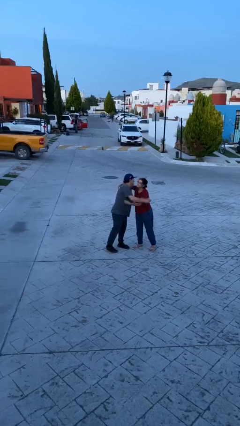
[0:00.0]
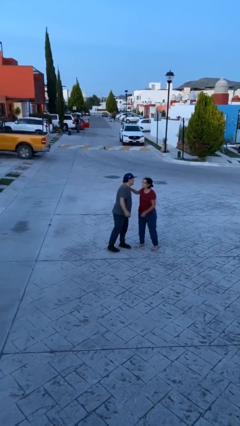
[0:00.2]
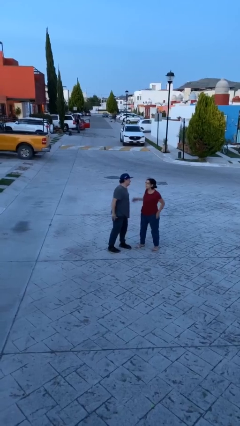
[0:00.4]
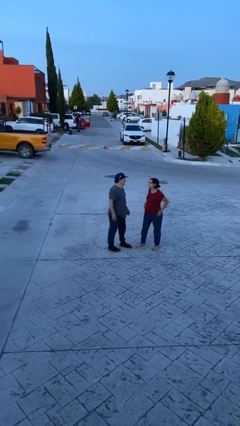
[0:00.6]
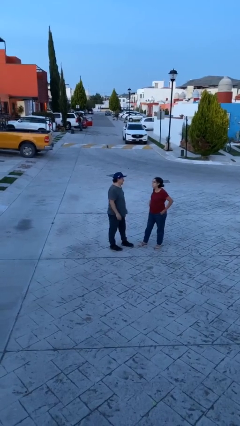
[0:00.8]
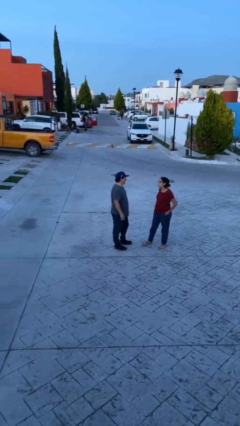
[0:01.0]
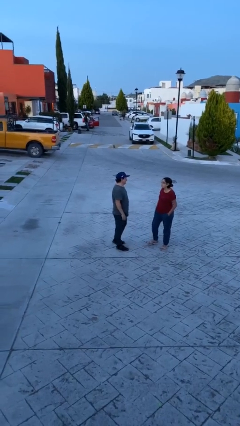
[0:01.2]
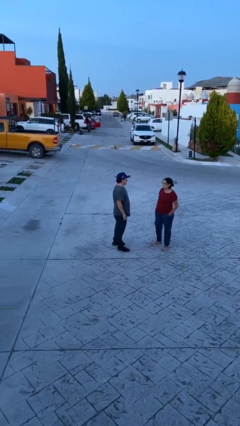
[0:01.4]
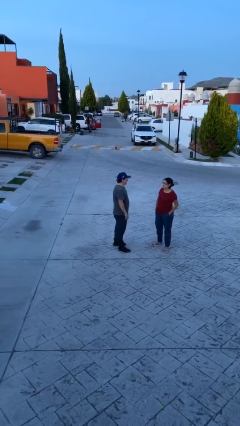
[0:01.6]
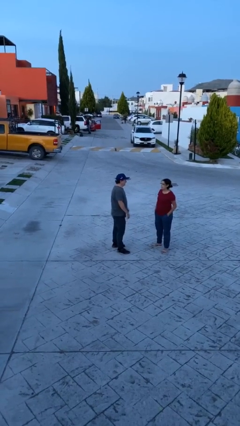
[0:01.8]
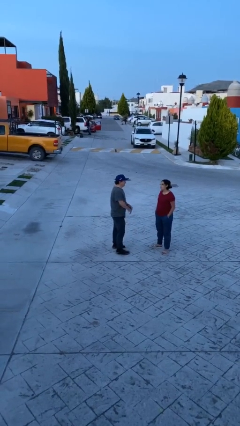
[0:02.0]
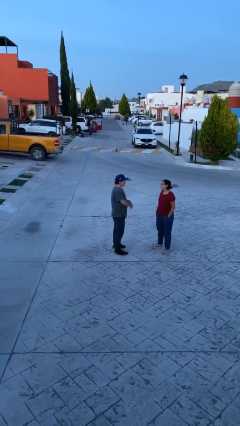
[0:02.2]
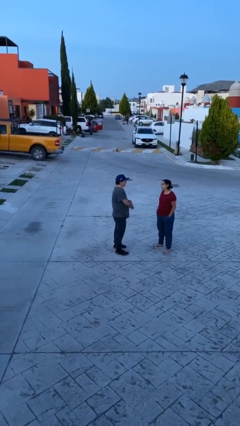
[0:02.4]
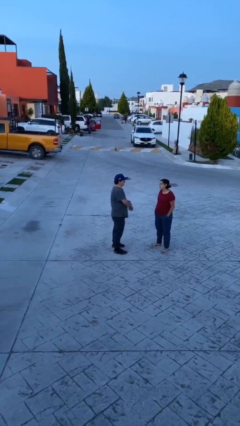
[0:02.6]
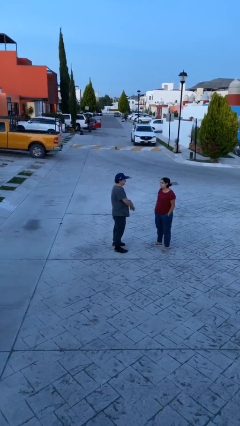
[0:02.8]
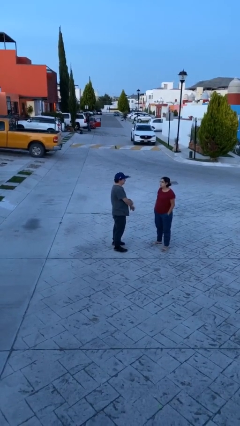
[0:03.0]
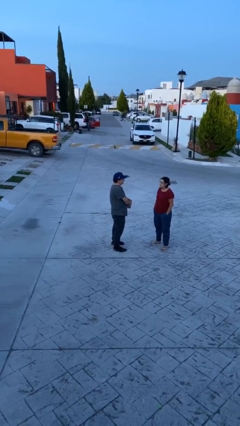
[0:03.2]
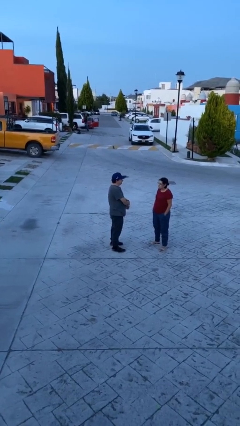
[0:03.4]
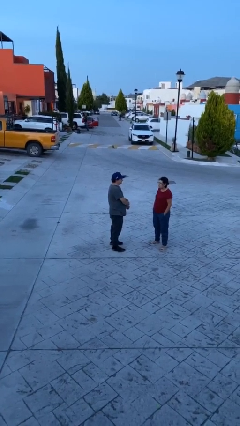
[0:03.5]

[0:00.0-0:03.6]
person talks to person

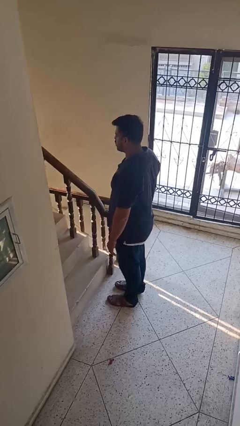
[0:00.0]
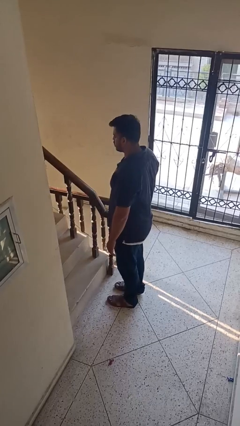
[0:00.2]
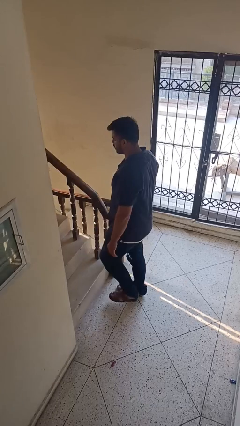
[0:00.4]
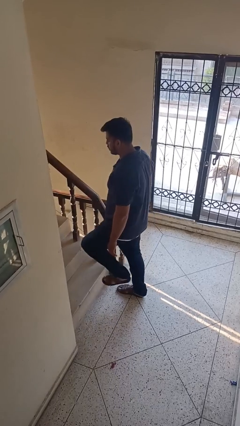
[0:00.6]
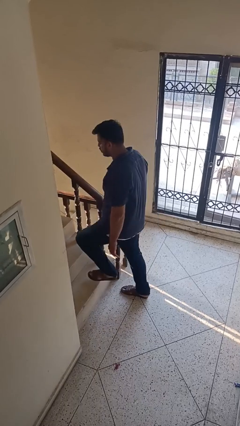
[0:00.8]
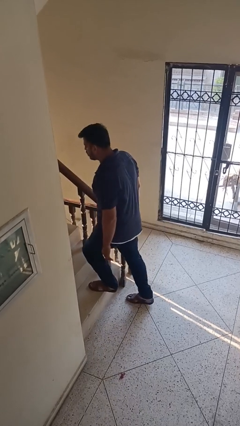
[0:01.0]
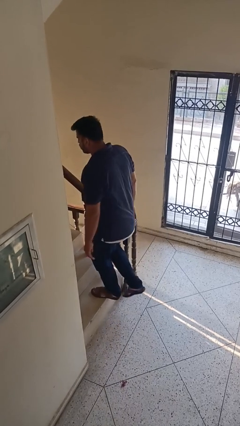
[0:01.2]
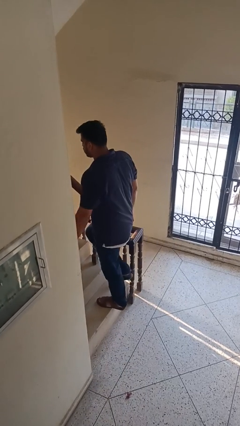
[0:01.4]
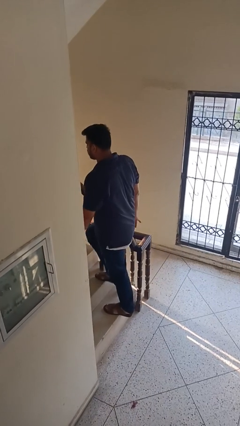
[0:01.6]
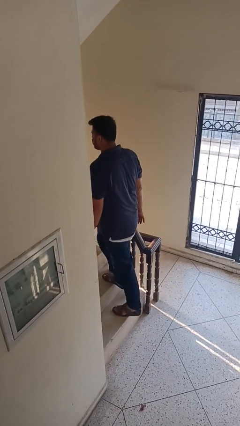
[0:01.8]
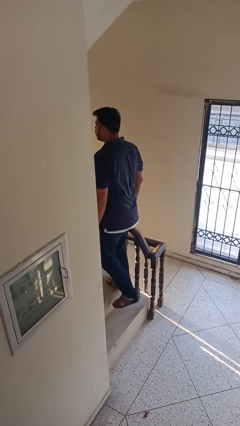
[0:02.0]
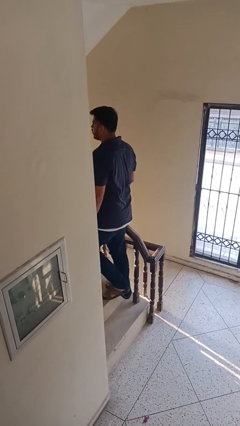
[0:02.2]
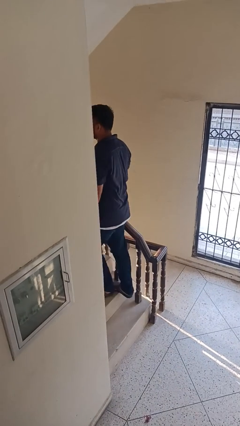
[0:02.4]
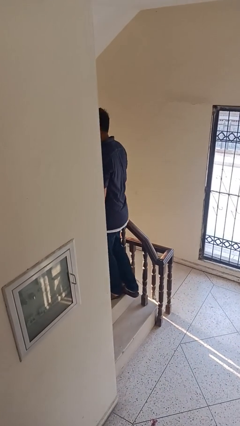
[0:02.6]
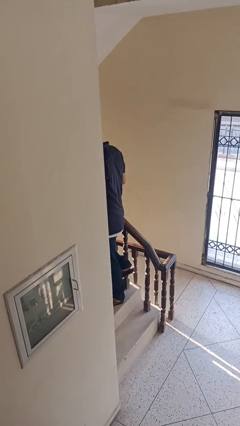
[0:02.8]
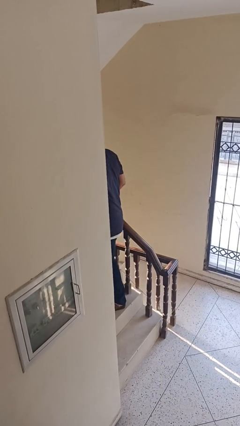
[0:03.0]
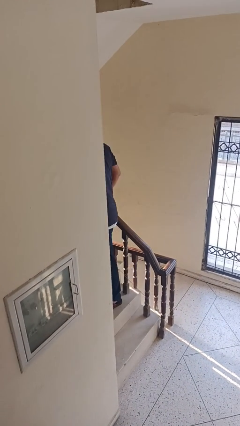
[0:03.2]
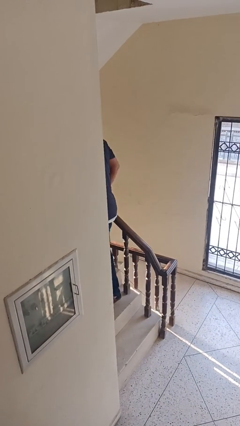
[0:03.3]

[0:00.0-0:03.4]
person climbs up stairs

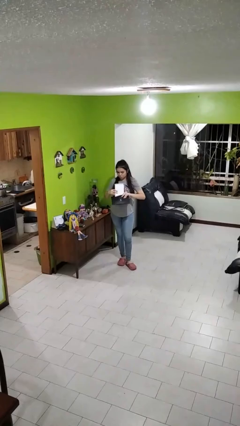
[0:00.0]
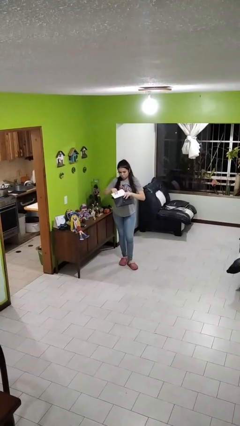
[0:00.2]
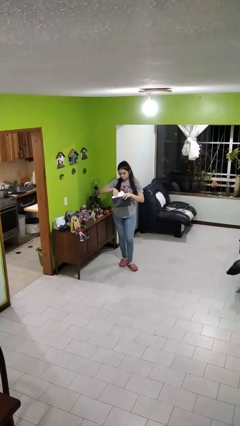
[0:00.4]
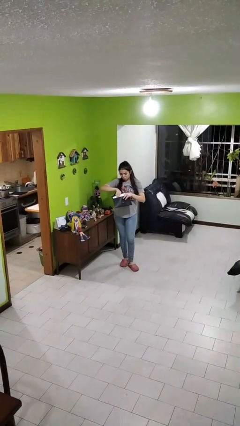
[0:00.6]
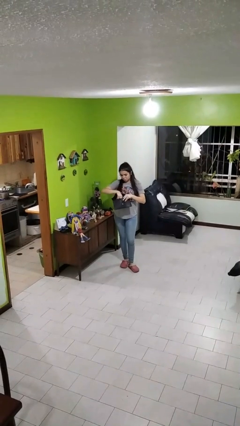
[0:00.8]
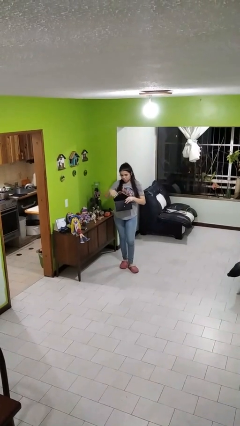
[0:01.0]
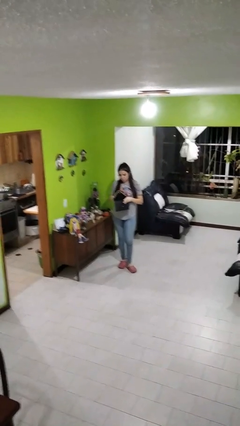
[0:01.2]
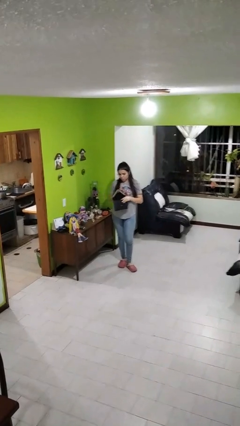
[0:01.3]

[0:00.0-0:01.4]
person puts object into purse

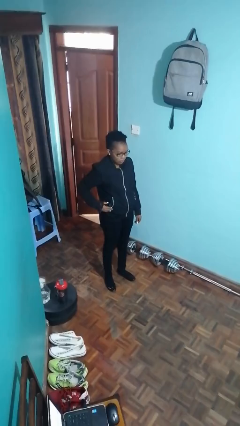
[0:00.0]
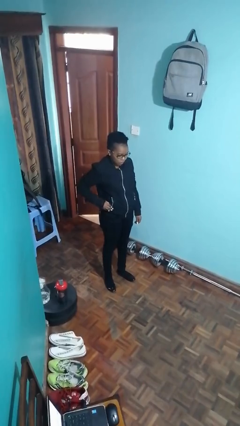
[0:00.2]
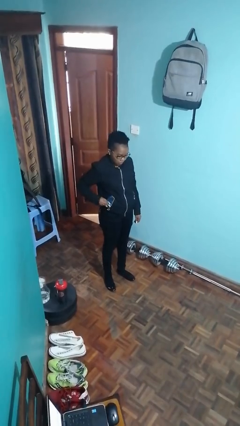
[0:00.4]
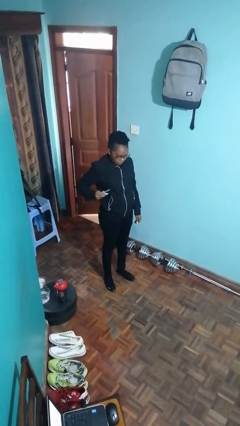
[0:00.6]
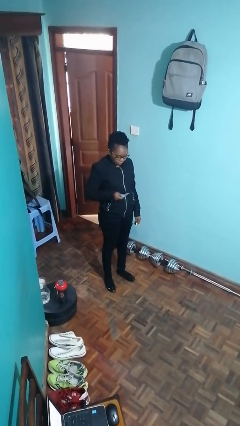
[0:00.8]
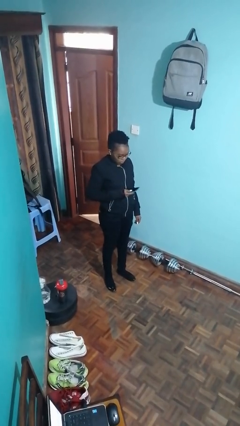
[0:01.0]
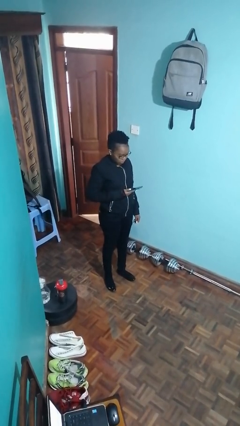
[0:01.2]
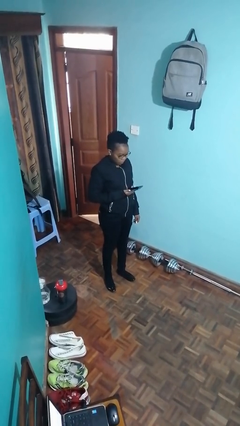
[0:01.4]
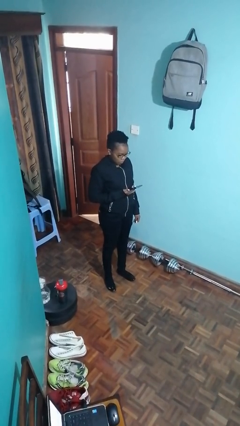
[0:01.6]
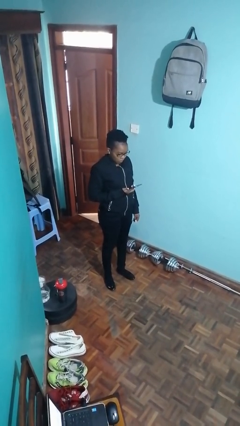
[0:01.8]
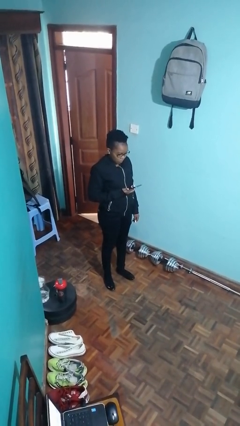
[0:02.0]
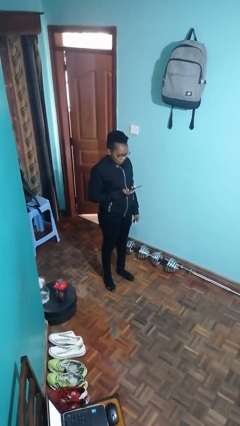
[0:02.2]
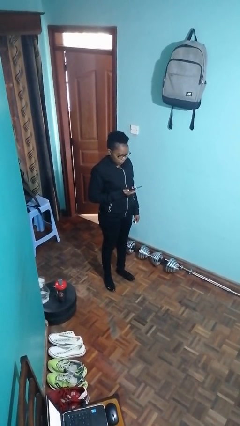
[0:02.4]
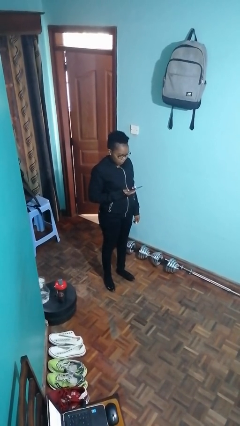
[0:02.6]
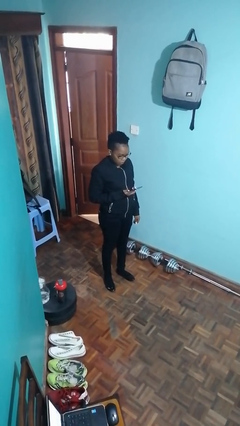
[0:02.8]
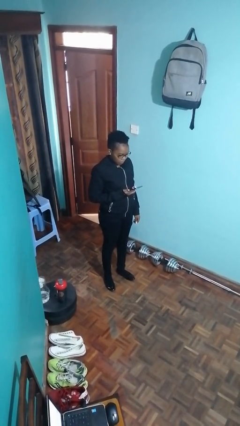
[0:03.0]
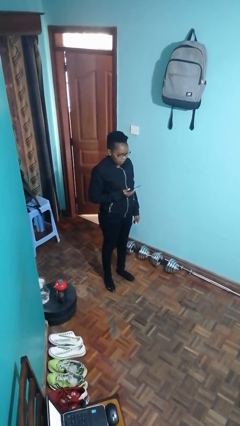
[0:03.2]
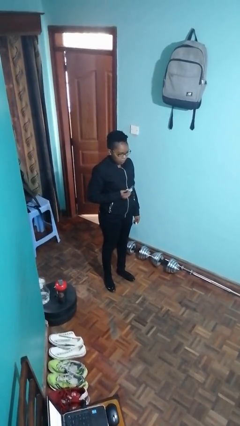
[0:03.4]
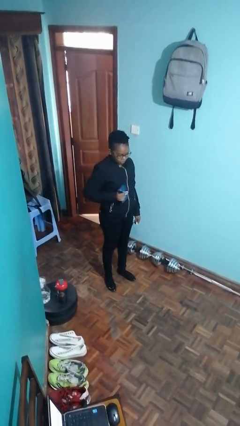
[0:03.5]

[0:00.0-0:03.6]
person takes phone from pocket

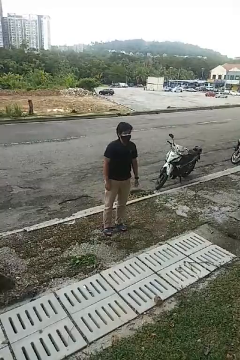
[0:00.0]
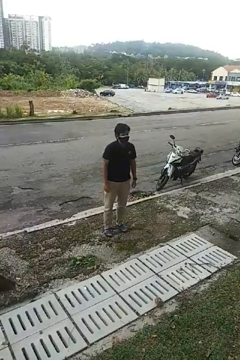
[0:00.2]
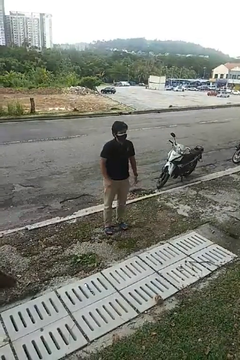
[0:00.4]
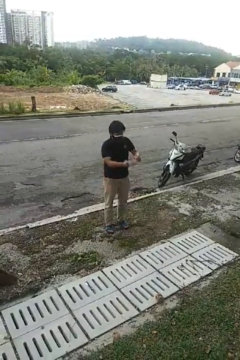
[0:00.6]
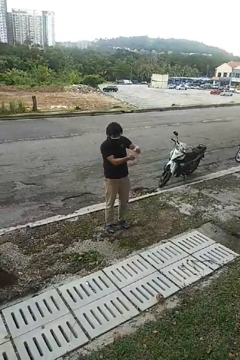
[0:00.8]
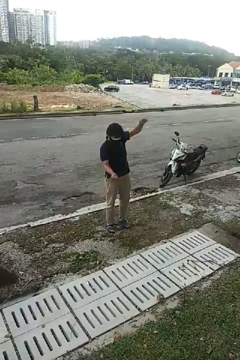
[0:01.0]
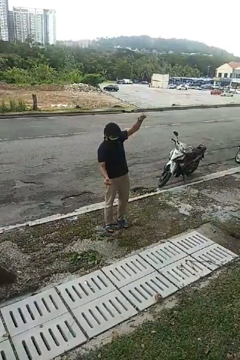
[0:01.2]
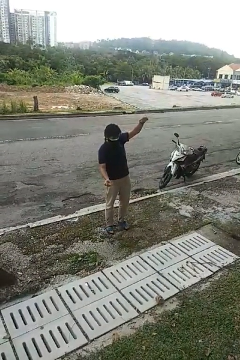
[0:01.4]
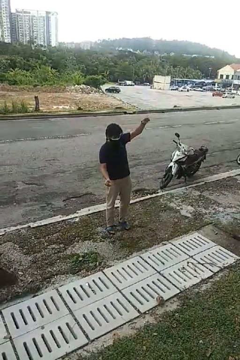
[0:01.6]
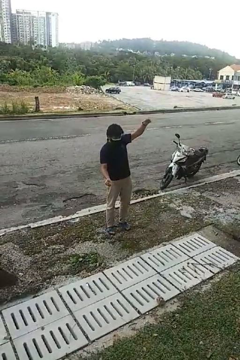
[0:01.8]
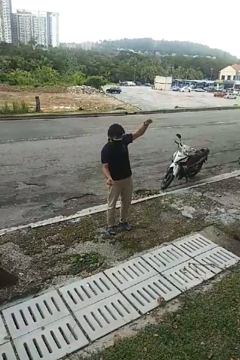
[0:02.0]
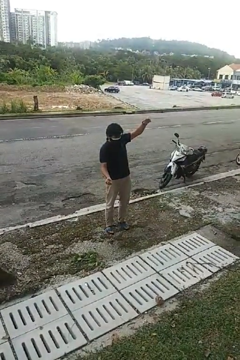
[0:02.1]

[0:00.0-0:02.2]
person gestures zoom in

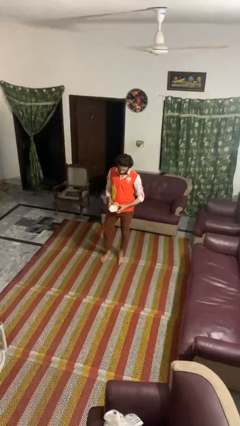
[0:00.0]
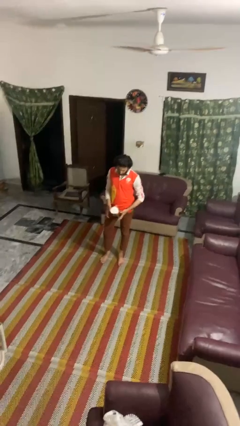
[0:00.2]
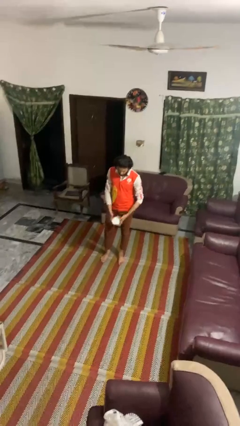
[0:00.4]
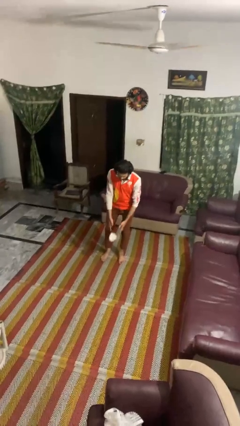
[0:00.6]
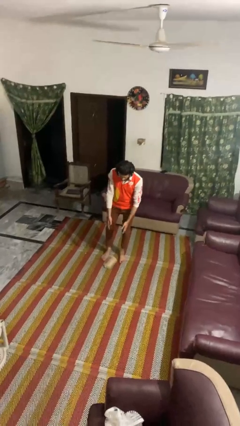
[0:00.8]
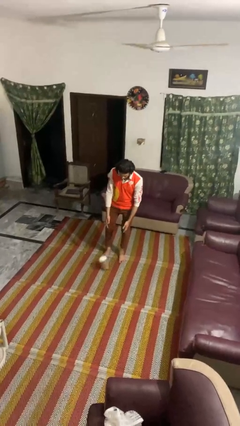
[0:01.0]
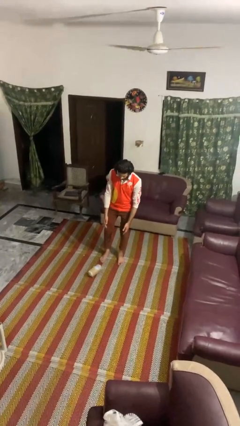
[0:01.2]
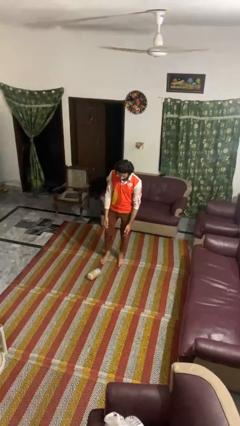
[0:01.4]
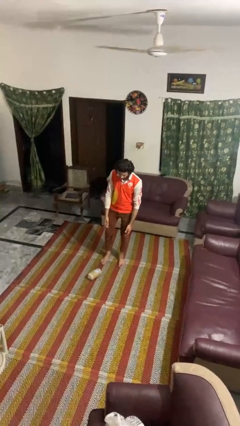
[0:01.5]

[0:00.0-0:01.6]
person drops object

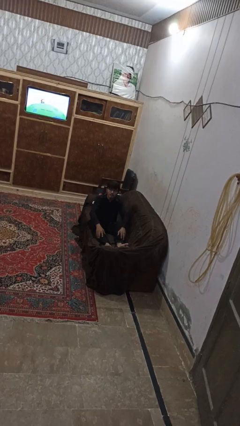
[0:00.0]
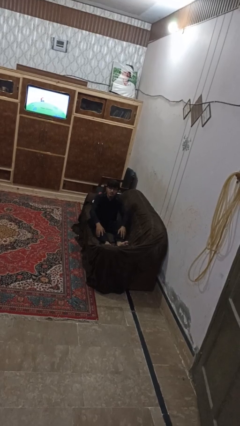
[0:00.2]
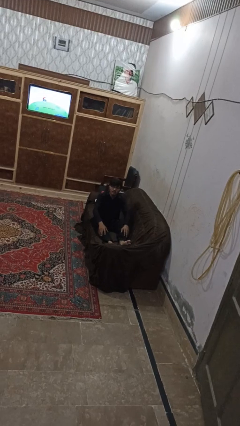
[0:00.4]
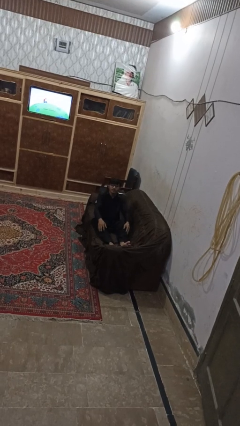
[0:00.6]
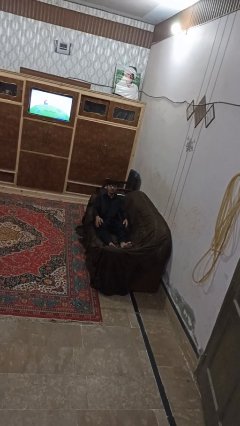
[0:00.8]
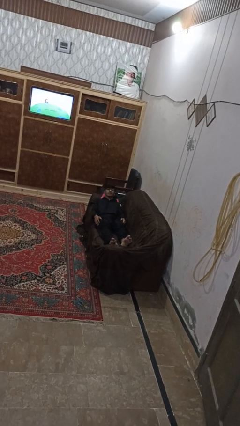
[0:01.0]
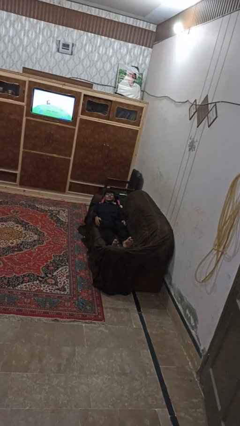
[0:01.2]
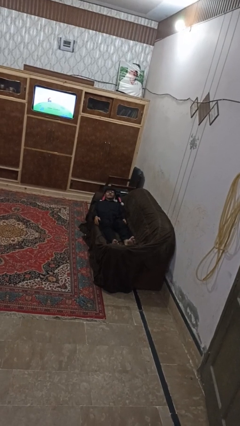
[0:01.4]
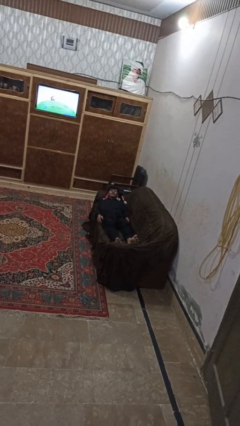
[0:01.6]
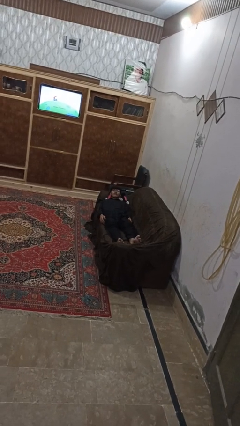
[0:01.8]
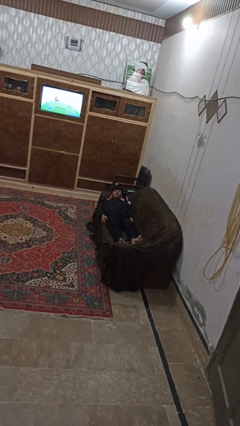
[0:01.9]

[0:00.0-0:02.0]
person lies down on couch
